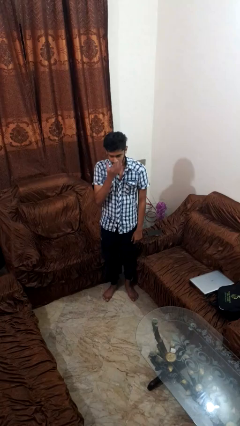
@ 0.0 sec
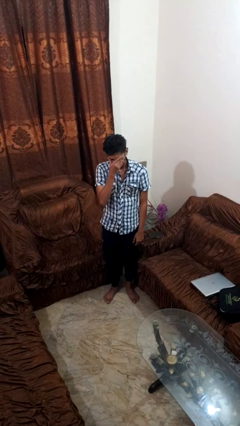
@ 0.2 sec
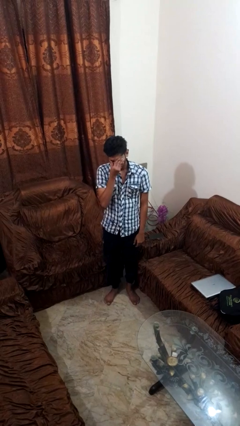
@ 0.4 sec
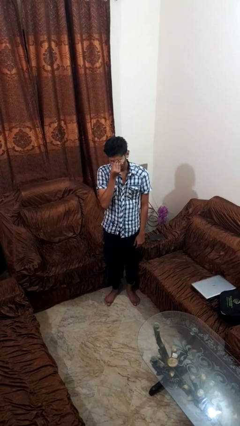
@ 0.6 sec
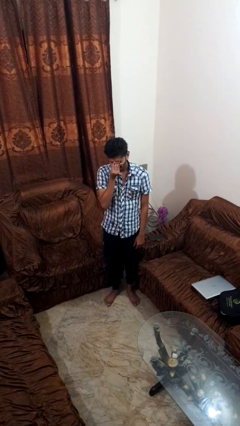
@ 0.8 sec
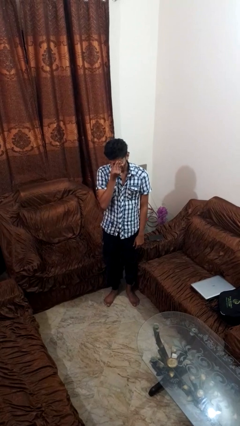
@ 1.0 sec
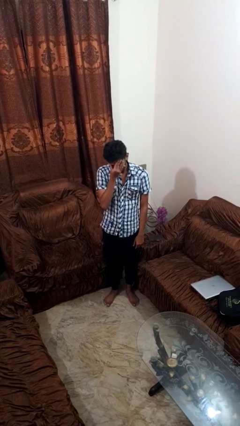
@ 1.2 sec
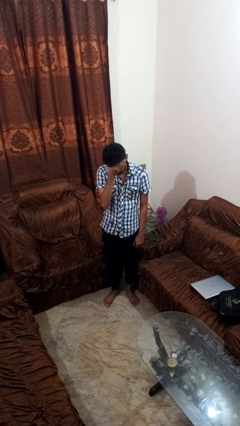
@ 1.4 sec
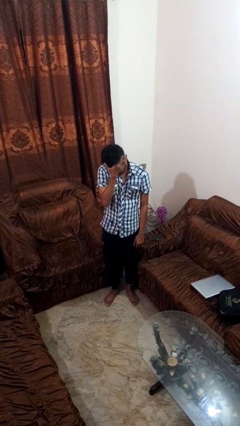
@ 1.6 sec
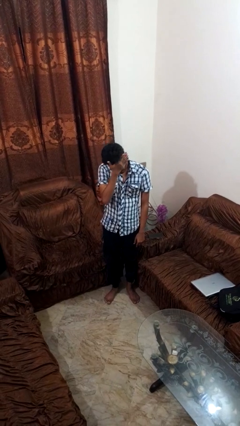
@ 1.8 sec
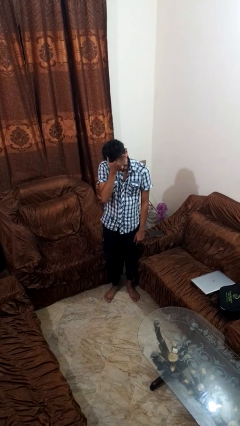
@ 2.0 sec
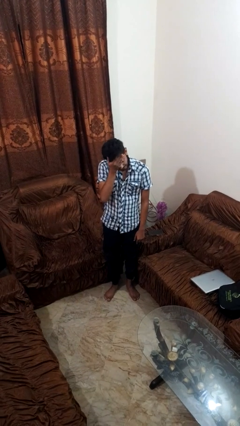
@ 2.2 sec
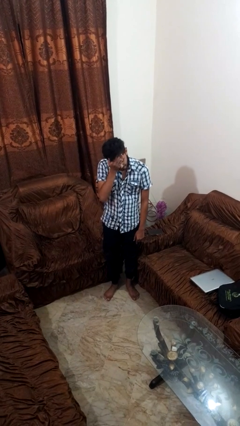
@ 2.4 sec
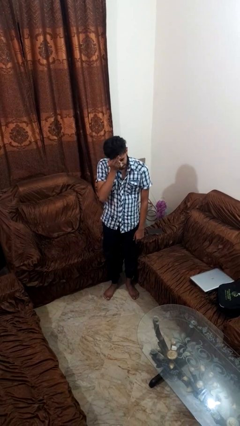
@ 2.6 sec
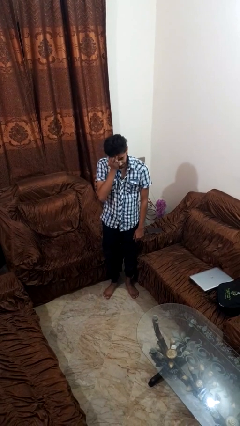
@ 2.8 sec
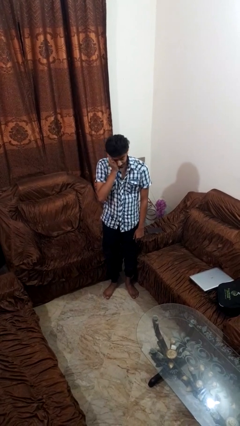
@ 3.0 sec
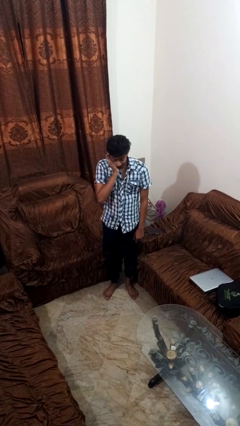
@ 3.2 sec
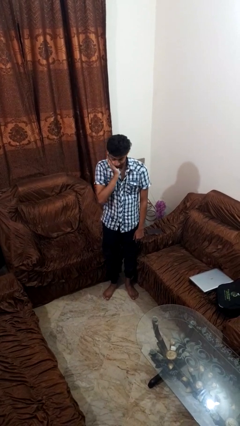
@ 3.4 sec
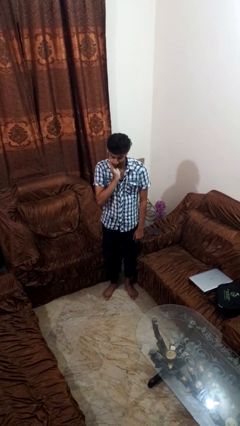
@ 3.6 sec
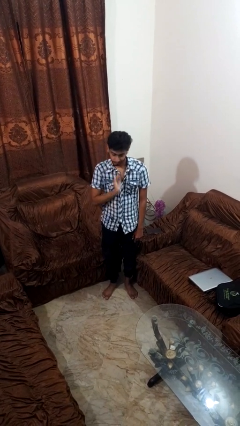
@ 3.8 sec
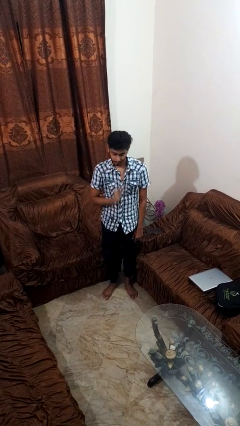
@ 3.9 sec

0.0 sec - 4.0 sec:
person scratches face

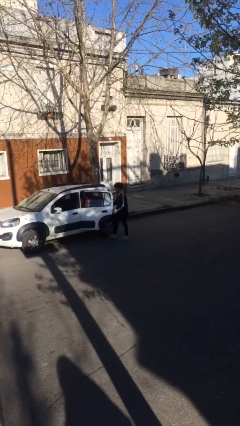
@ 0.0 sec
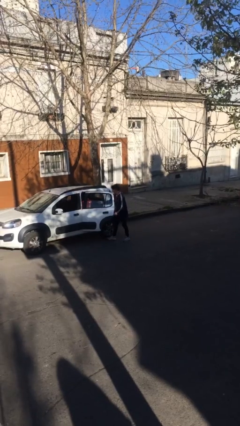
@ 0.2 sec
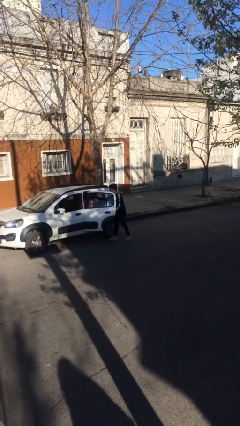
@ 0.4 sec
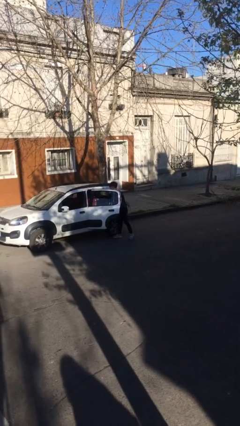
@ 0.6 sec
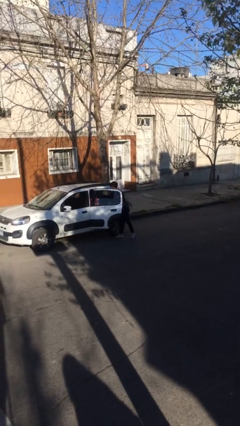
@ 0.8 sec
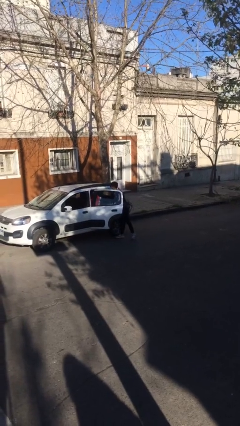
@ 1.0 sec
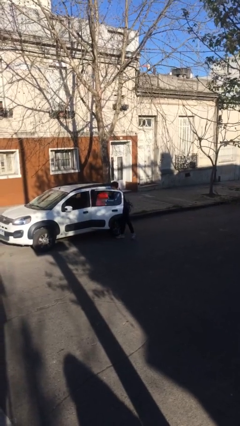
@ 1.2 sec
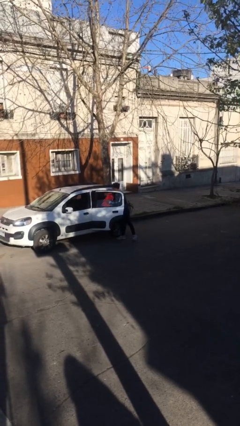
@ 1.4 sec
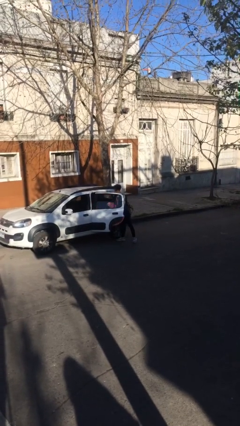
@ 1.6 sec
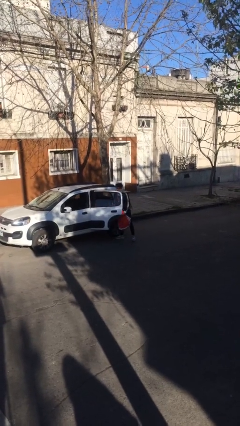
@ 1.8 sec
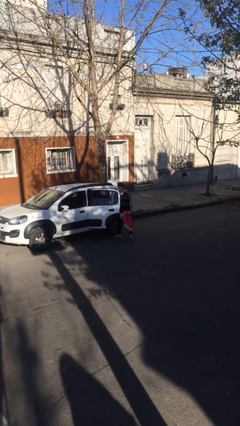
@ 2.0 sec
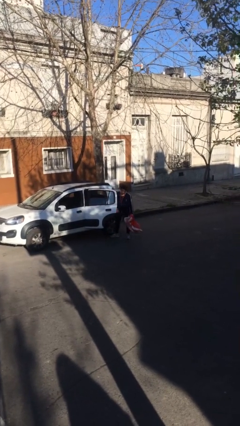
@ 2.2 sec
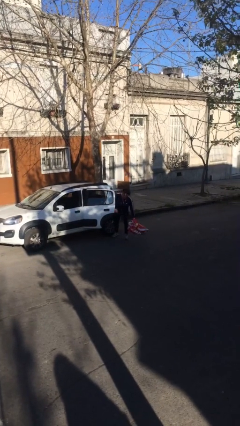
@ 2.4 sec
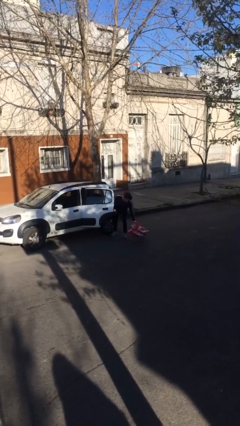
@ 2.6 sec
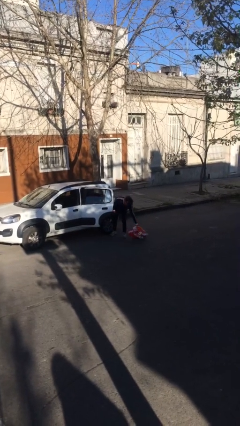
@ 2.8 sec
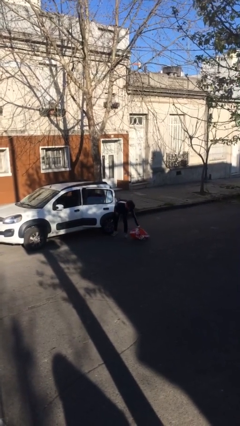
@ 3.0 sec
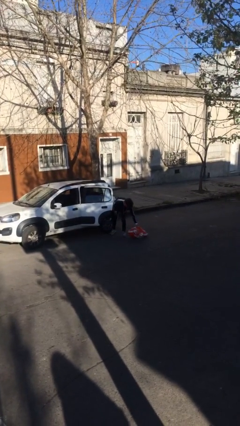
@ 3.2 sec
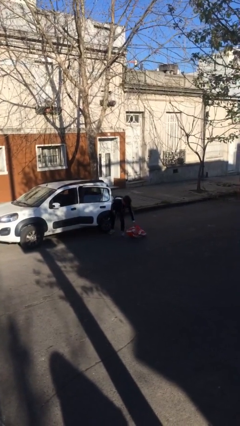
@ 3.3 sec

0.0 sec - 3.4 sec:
person unloads car

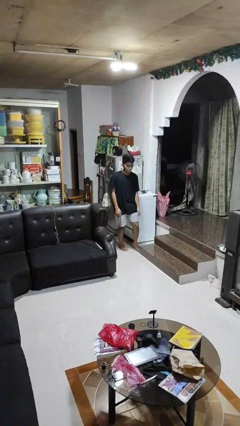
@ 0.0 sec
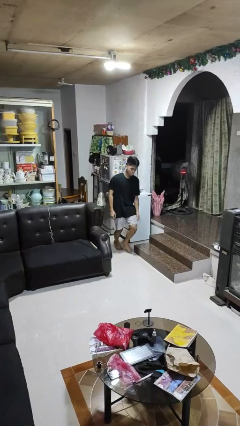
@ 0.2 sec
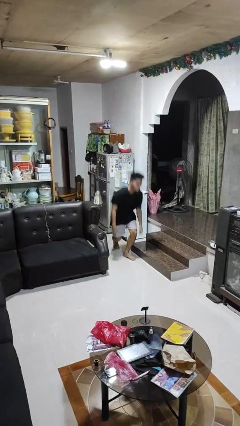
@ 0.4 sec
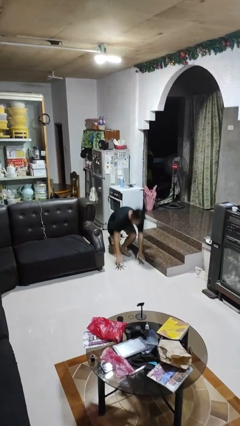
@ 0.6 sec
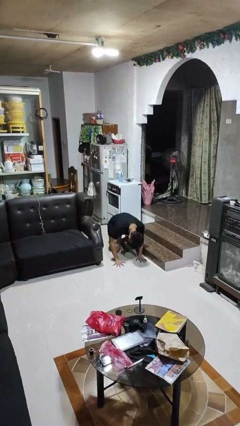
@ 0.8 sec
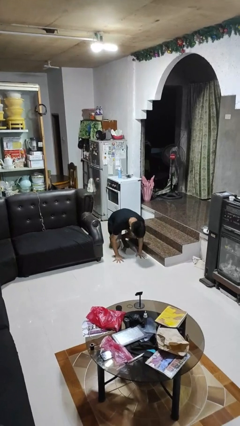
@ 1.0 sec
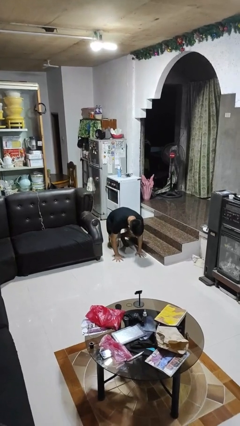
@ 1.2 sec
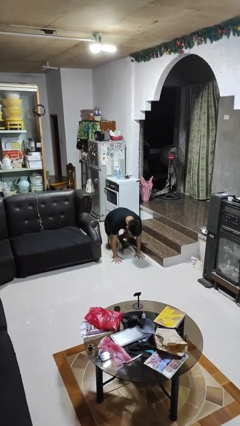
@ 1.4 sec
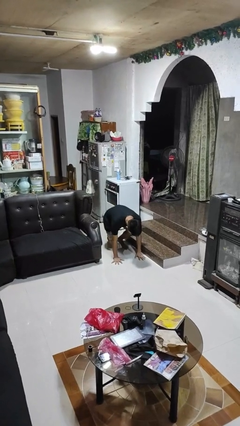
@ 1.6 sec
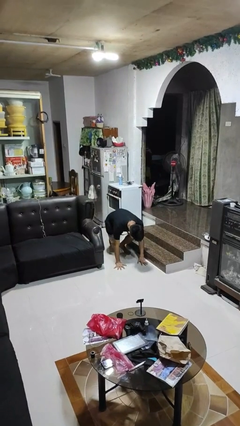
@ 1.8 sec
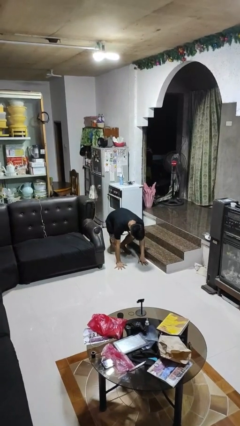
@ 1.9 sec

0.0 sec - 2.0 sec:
person trips on object on floor

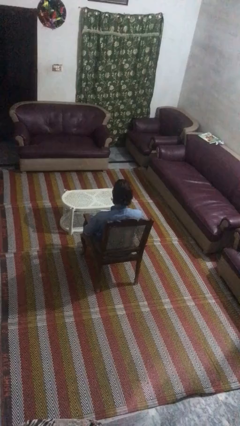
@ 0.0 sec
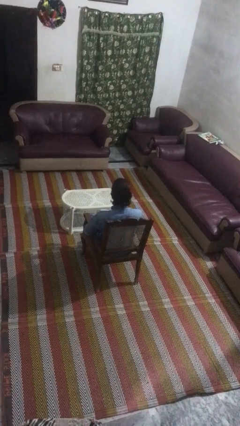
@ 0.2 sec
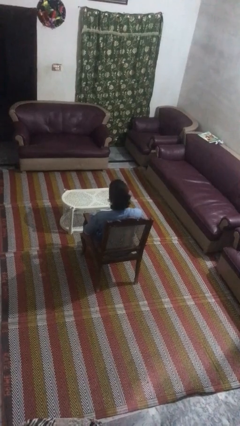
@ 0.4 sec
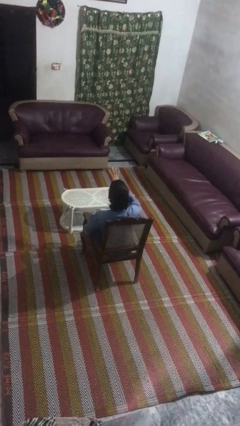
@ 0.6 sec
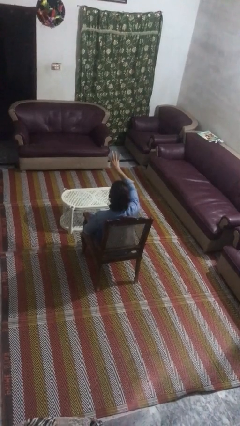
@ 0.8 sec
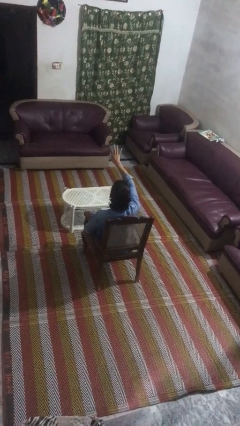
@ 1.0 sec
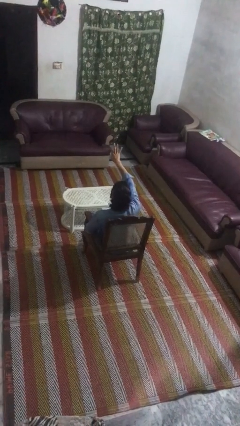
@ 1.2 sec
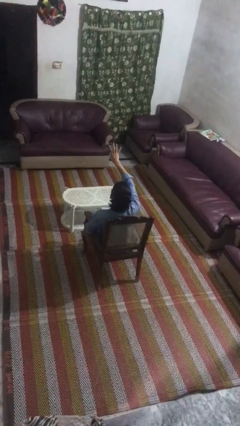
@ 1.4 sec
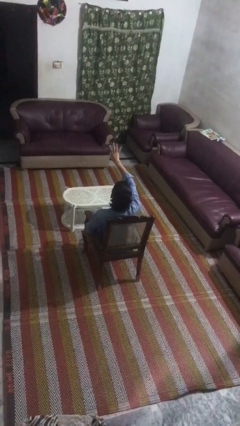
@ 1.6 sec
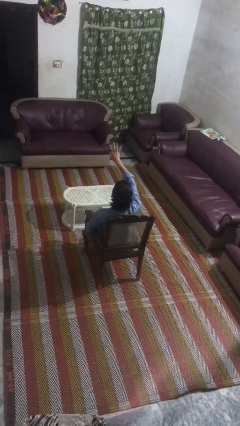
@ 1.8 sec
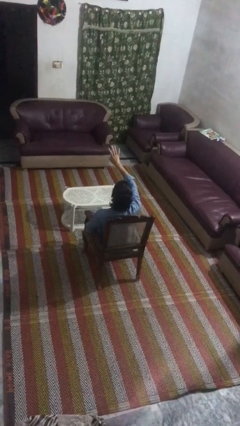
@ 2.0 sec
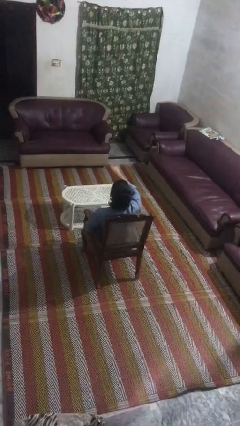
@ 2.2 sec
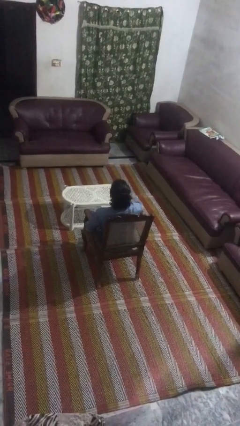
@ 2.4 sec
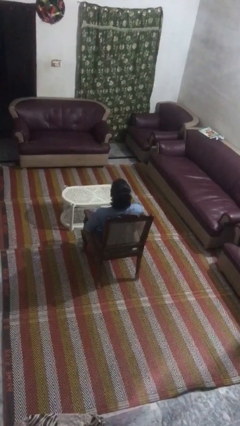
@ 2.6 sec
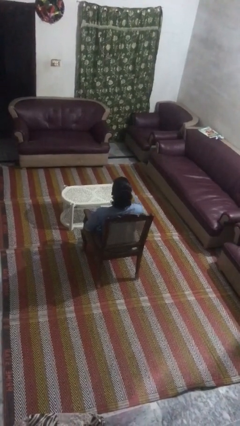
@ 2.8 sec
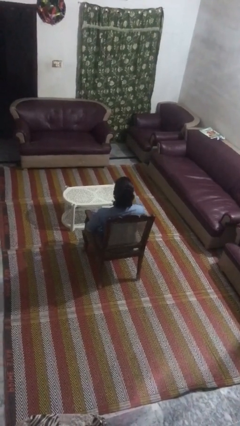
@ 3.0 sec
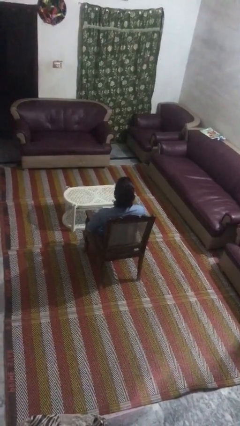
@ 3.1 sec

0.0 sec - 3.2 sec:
person gestures number four

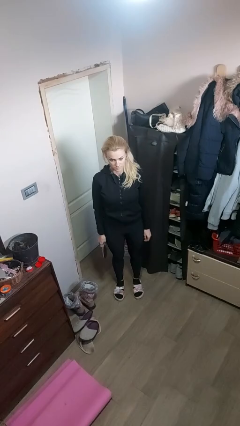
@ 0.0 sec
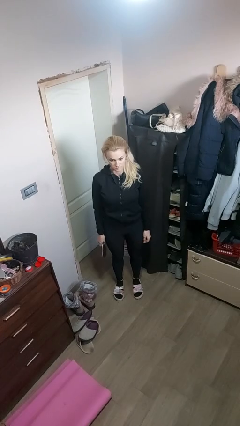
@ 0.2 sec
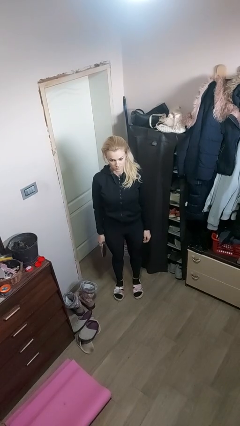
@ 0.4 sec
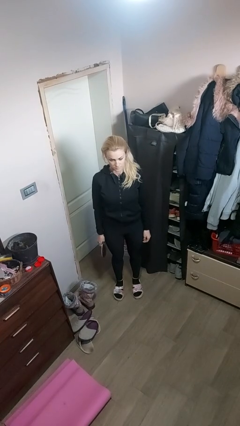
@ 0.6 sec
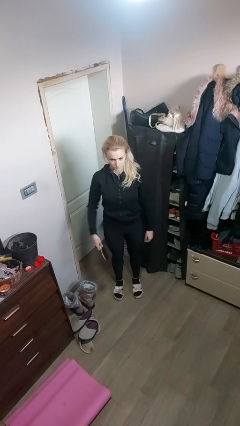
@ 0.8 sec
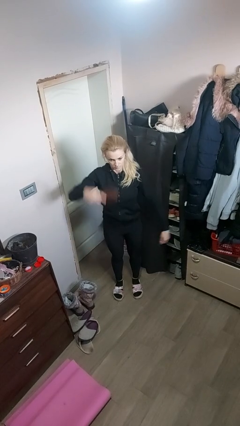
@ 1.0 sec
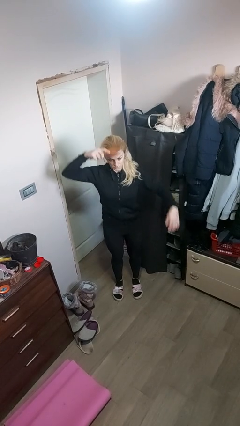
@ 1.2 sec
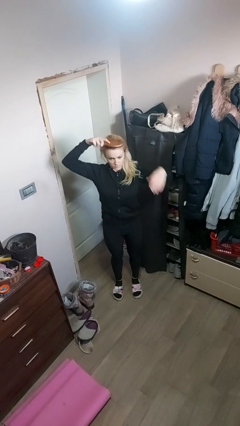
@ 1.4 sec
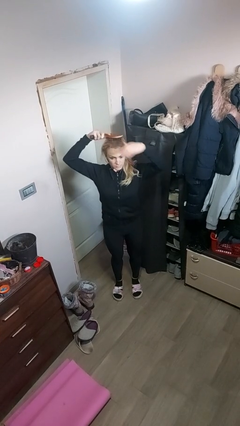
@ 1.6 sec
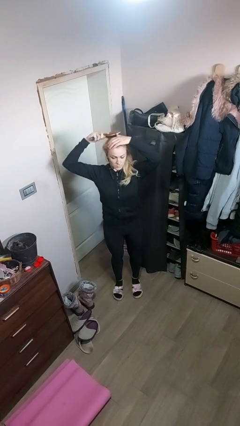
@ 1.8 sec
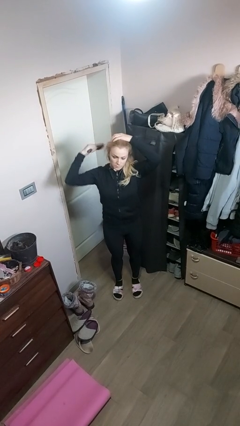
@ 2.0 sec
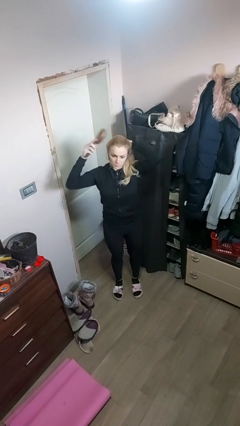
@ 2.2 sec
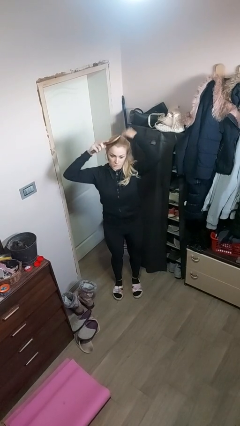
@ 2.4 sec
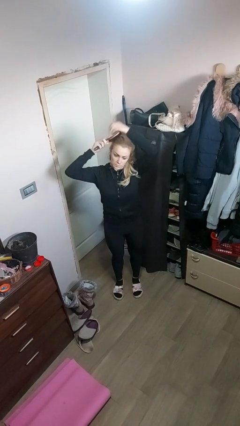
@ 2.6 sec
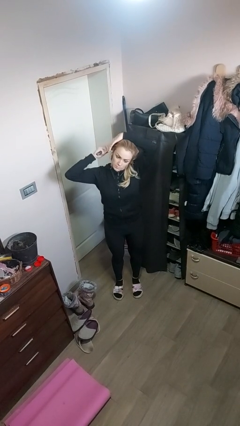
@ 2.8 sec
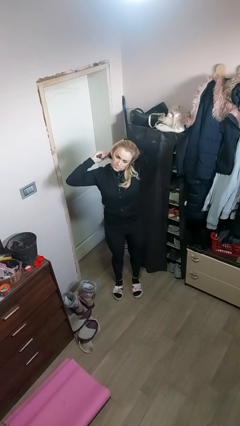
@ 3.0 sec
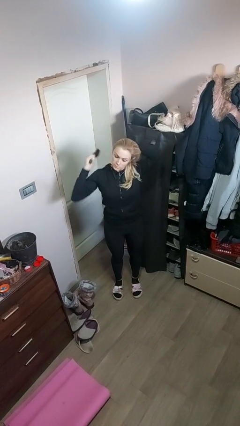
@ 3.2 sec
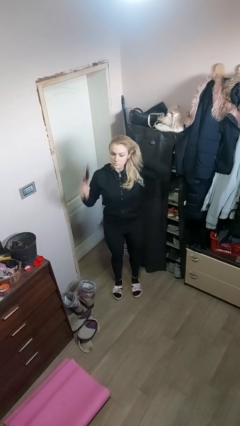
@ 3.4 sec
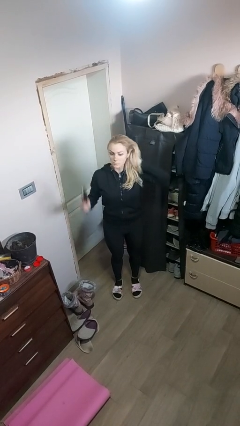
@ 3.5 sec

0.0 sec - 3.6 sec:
person brushes hair

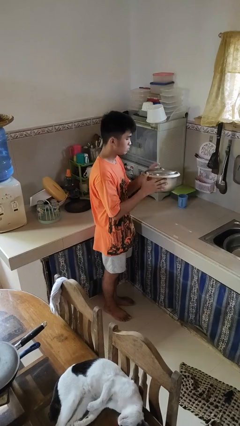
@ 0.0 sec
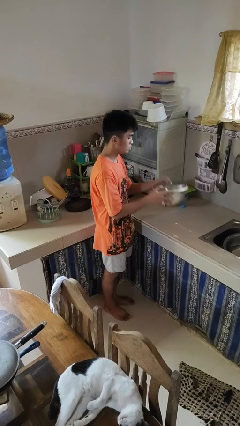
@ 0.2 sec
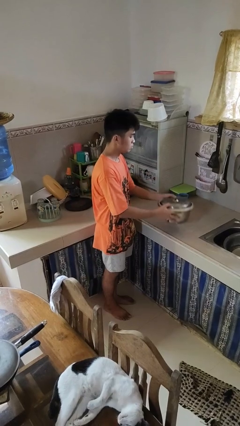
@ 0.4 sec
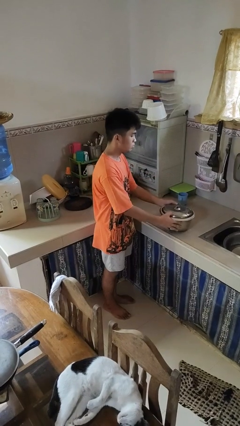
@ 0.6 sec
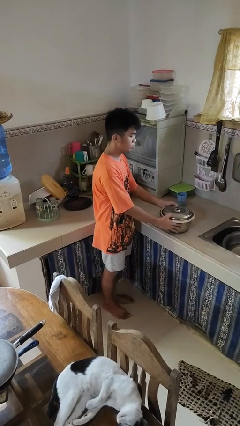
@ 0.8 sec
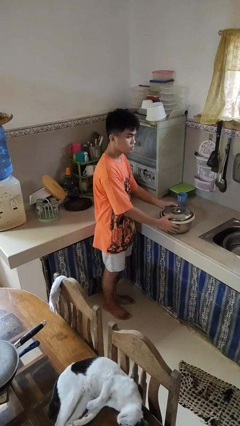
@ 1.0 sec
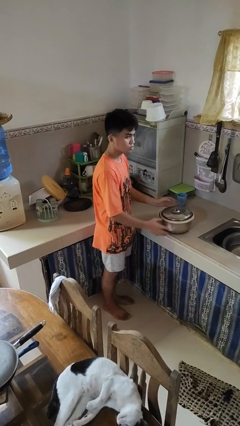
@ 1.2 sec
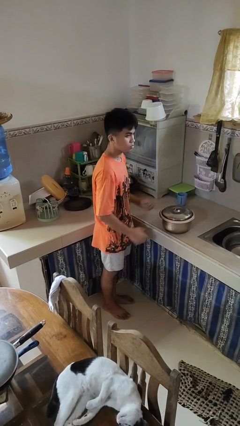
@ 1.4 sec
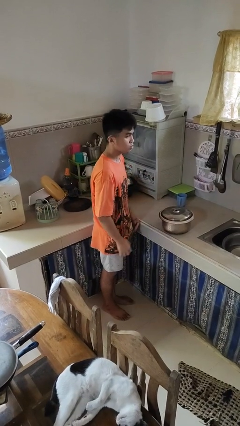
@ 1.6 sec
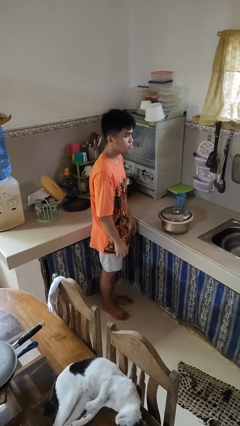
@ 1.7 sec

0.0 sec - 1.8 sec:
person puts down object on countertop
